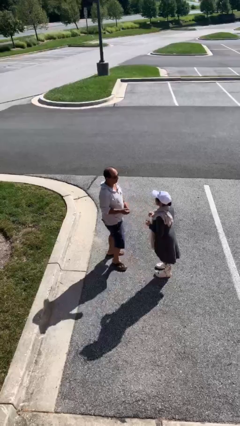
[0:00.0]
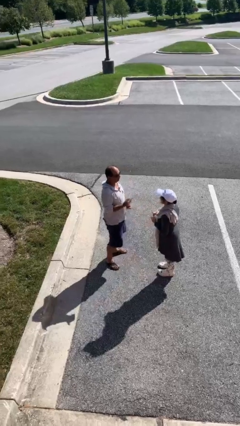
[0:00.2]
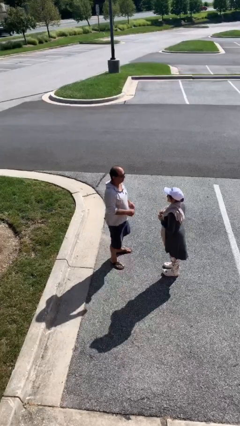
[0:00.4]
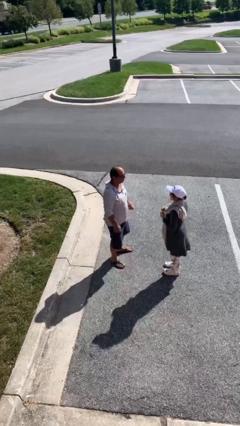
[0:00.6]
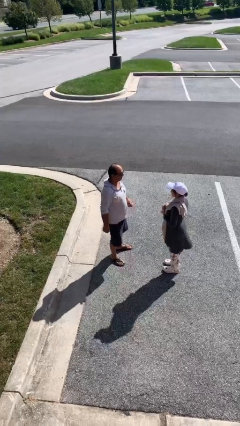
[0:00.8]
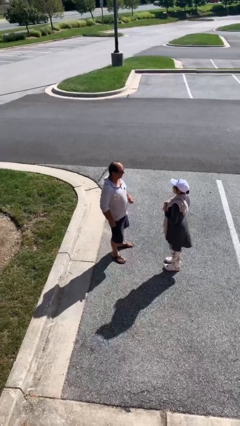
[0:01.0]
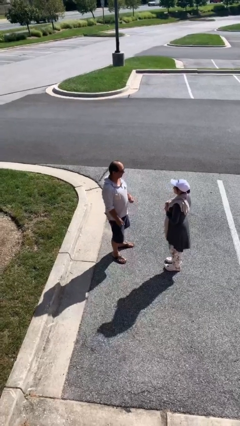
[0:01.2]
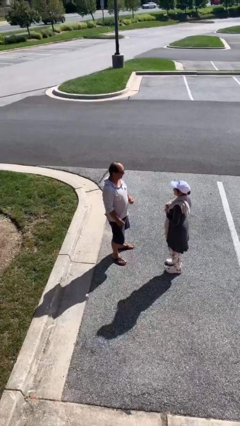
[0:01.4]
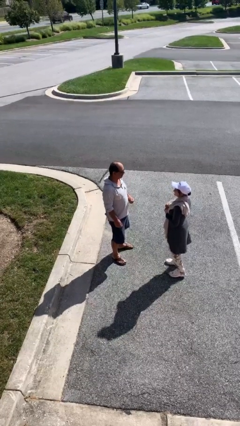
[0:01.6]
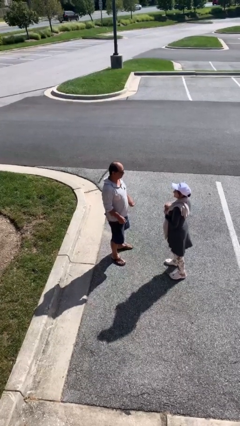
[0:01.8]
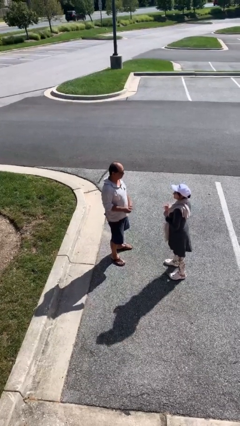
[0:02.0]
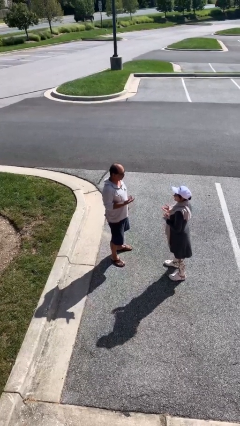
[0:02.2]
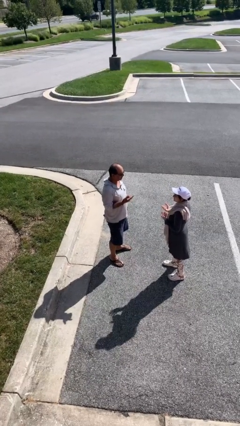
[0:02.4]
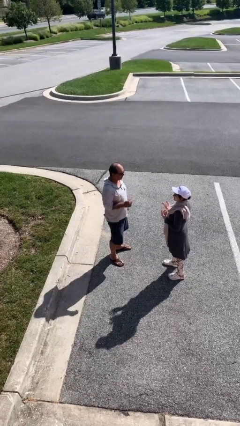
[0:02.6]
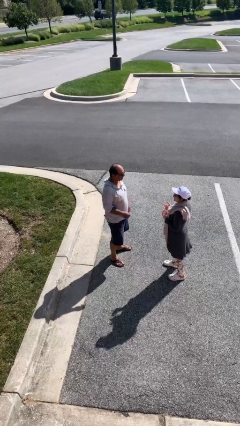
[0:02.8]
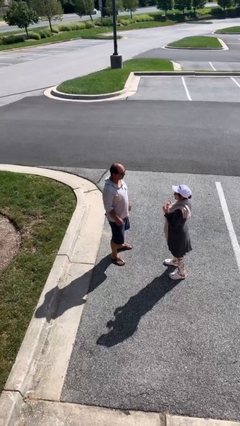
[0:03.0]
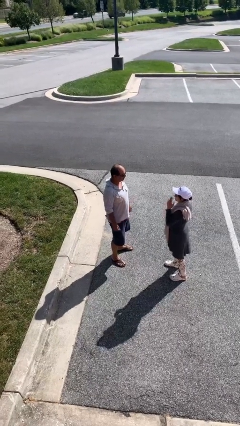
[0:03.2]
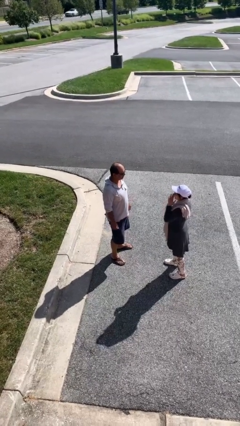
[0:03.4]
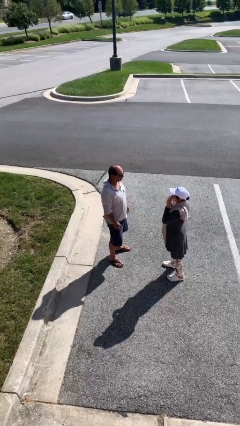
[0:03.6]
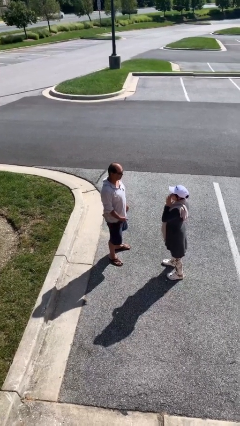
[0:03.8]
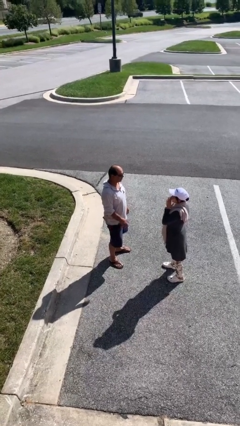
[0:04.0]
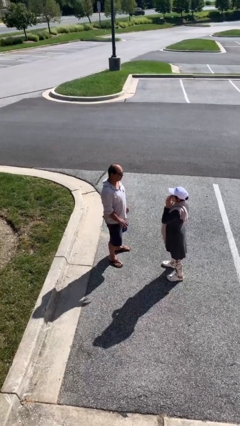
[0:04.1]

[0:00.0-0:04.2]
person talks to person

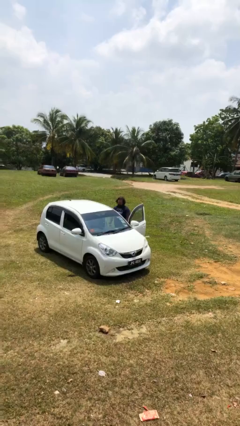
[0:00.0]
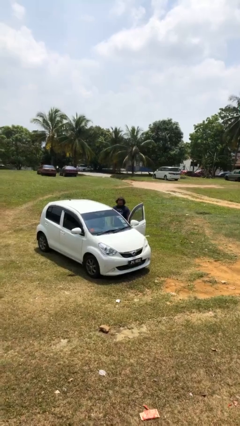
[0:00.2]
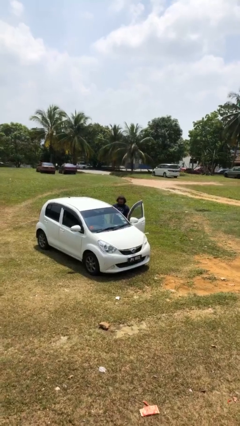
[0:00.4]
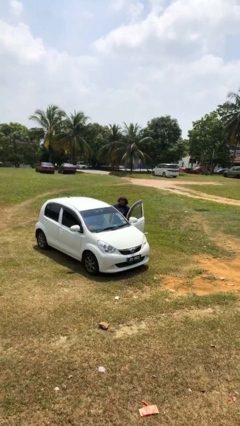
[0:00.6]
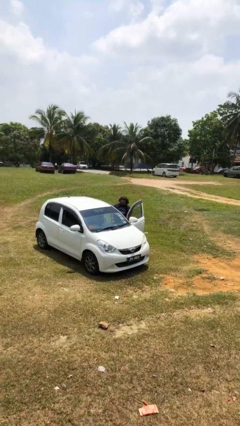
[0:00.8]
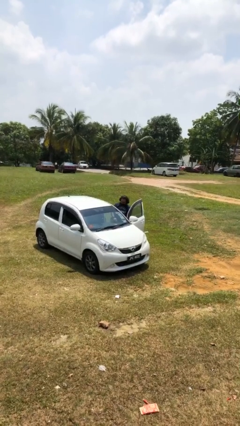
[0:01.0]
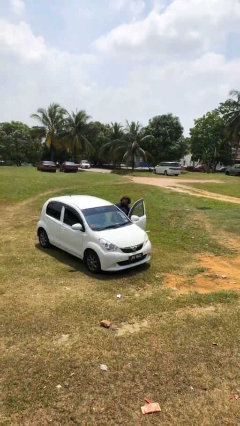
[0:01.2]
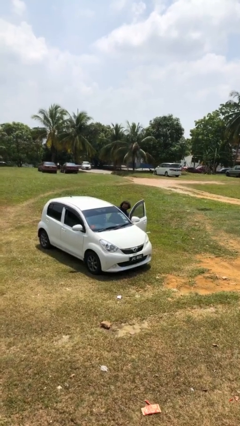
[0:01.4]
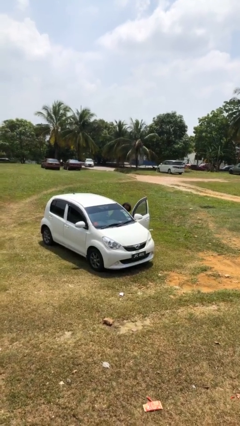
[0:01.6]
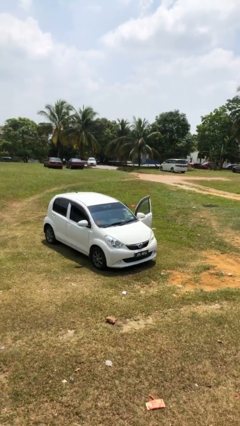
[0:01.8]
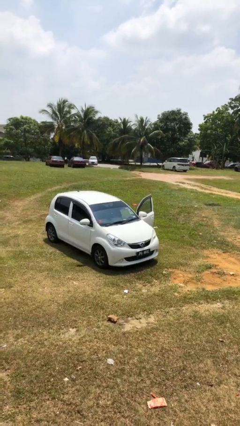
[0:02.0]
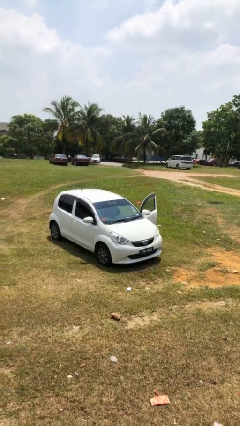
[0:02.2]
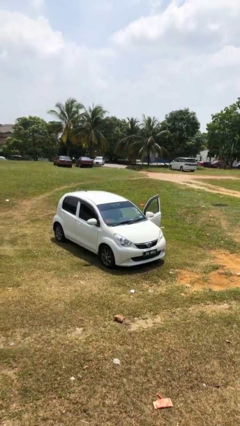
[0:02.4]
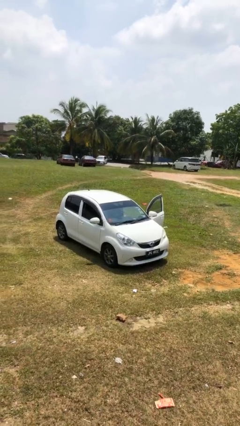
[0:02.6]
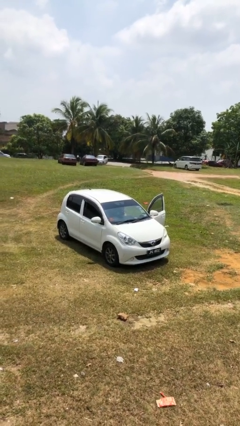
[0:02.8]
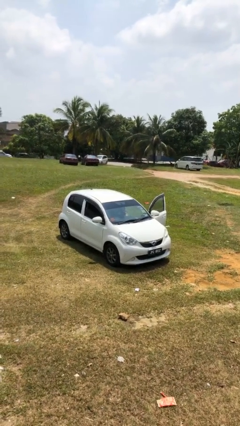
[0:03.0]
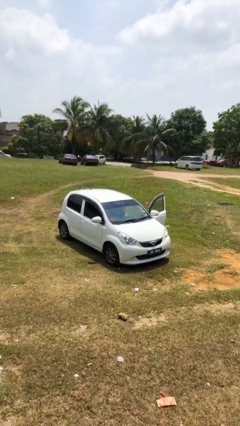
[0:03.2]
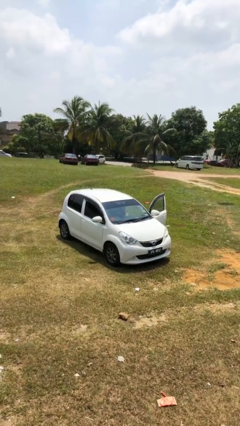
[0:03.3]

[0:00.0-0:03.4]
person enters car

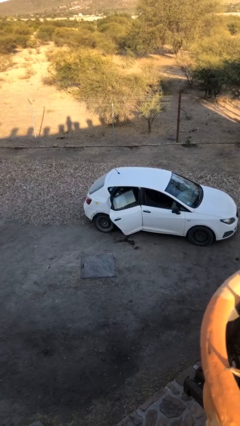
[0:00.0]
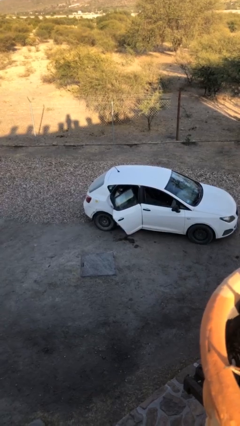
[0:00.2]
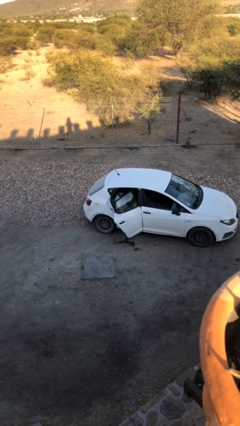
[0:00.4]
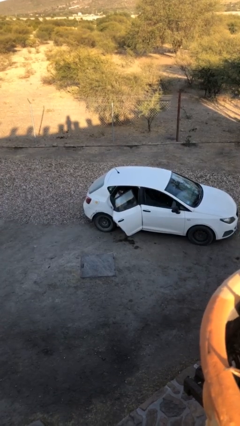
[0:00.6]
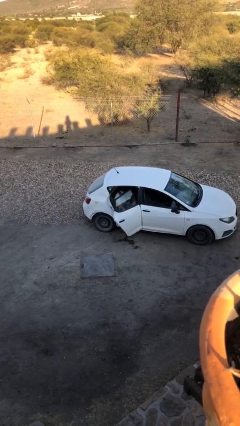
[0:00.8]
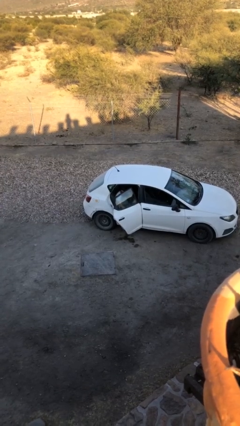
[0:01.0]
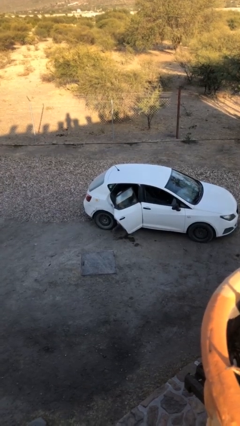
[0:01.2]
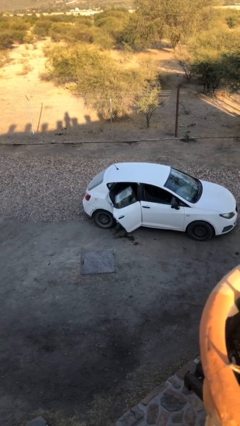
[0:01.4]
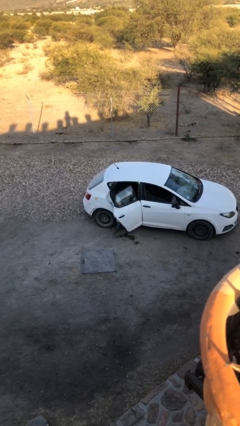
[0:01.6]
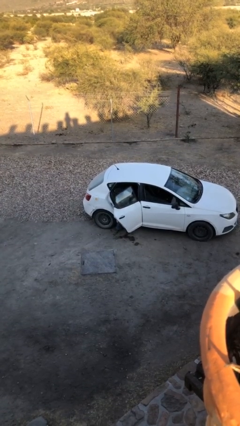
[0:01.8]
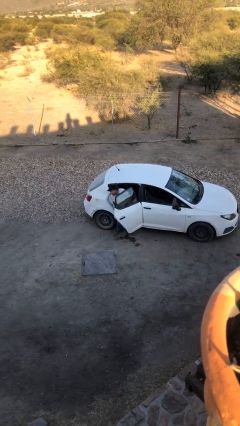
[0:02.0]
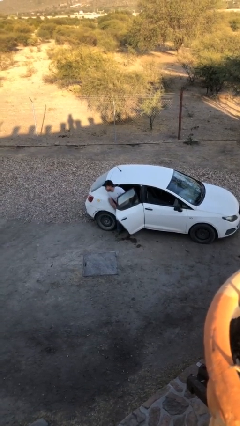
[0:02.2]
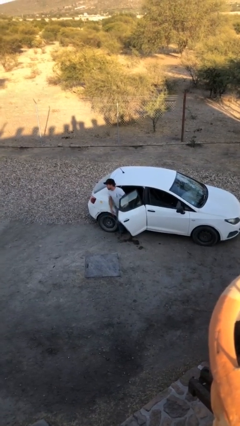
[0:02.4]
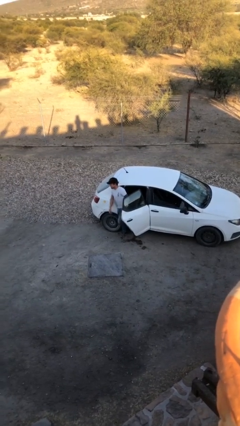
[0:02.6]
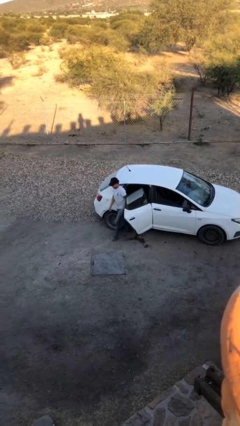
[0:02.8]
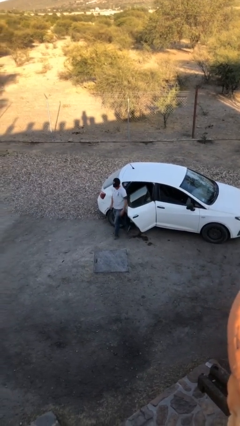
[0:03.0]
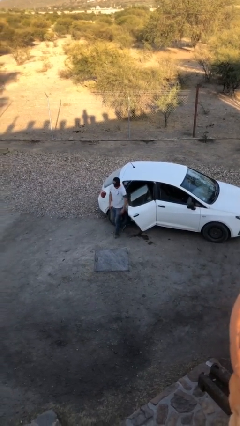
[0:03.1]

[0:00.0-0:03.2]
person exits car

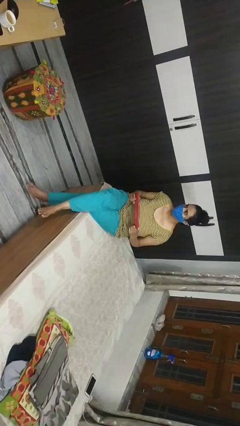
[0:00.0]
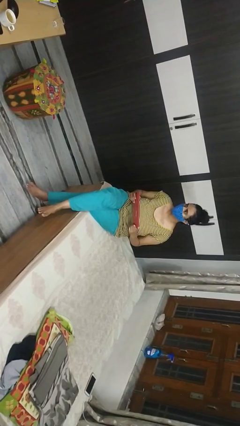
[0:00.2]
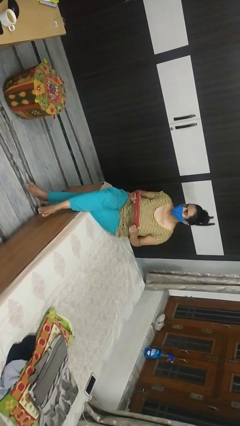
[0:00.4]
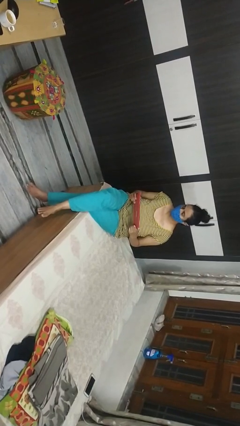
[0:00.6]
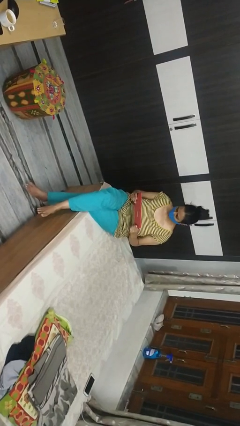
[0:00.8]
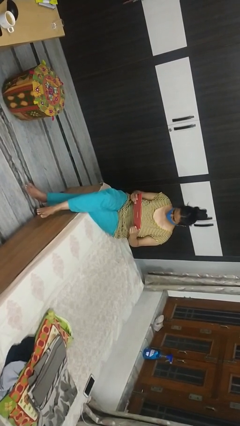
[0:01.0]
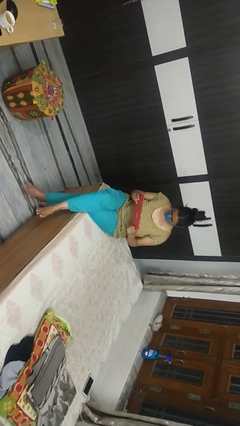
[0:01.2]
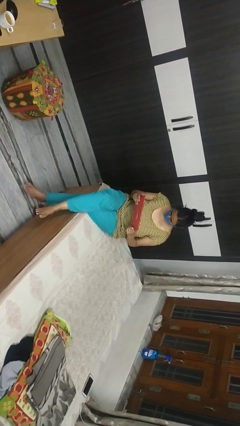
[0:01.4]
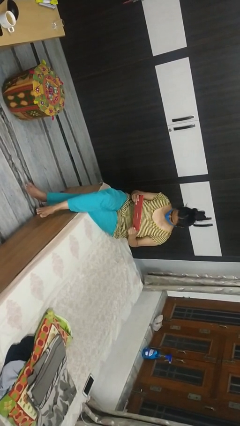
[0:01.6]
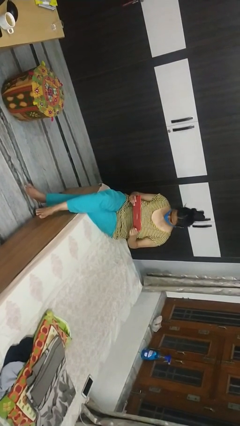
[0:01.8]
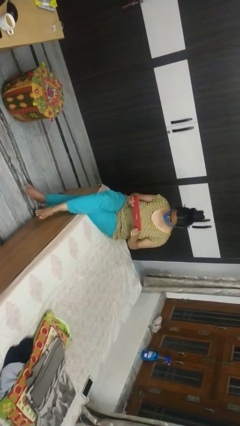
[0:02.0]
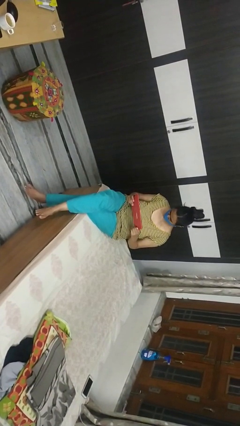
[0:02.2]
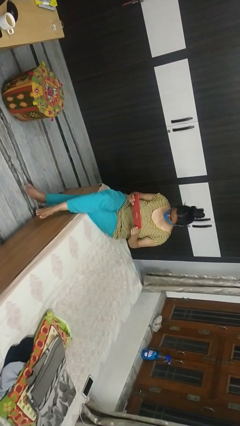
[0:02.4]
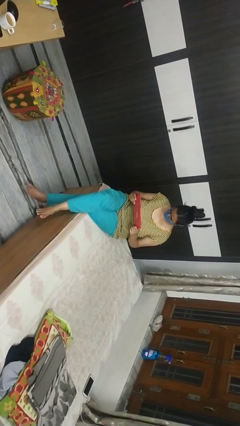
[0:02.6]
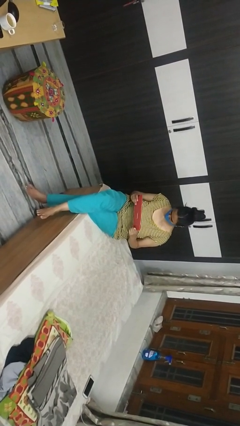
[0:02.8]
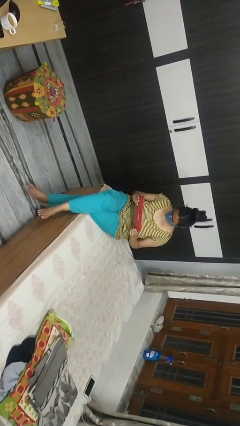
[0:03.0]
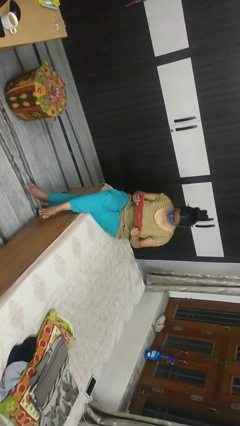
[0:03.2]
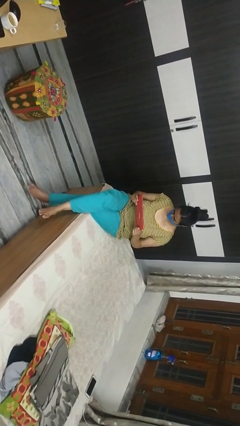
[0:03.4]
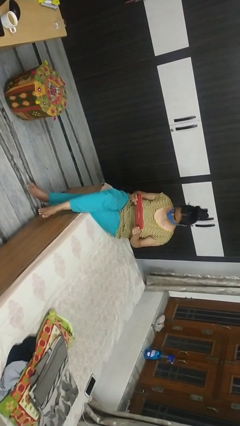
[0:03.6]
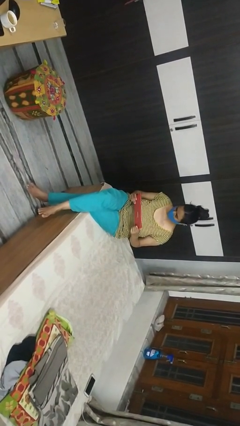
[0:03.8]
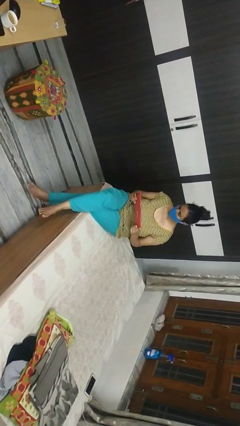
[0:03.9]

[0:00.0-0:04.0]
person interacts with handheld game

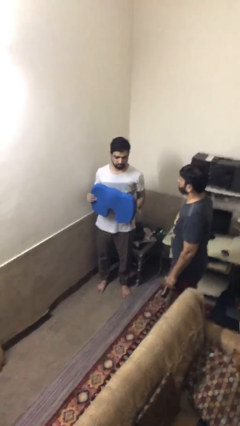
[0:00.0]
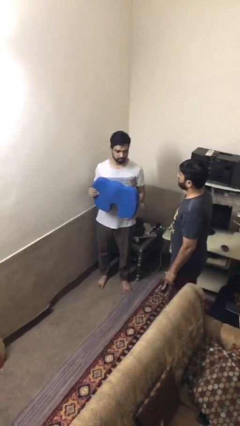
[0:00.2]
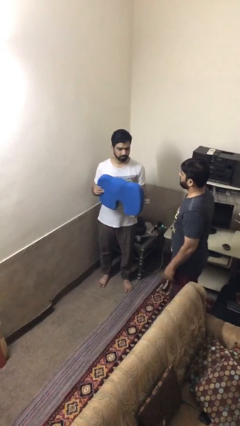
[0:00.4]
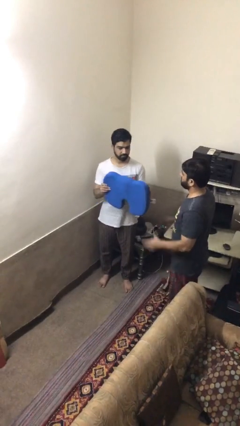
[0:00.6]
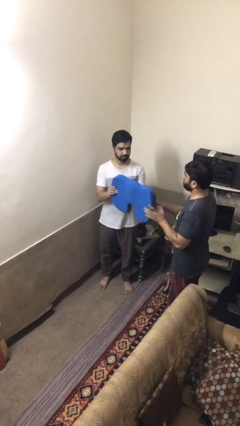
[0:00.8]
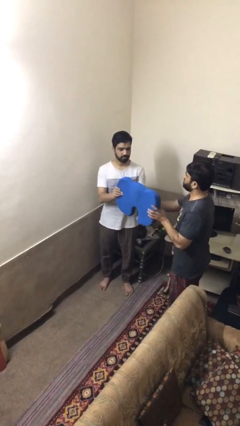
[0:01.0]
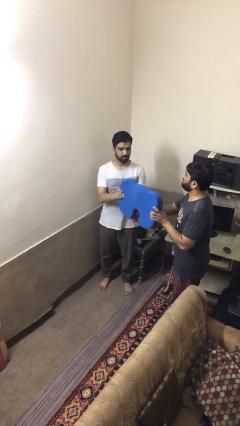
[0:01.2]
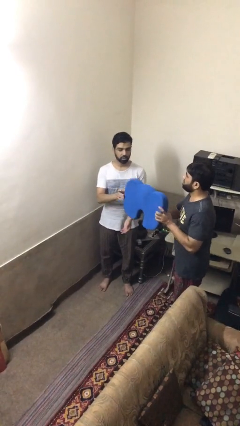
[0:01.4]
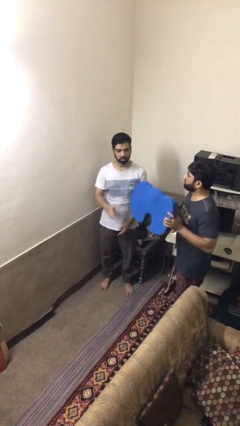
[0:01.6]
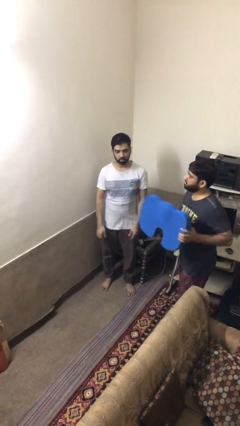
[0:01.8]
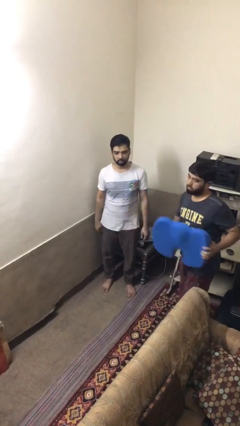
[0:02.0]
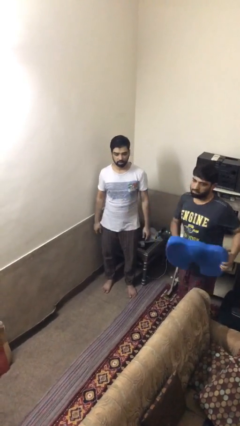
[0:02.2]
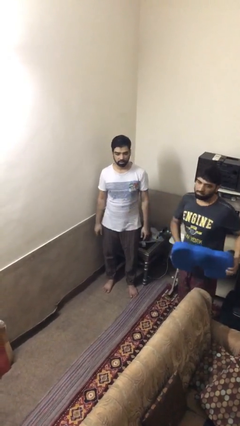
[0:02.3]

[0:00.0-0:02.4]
person transfers object to person

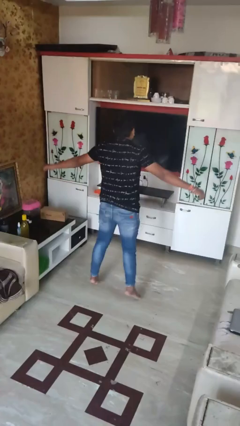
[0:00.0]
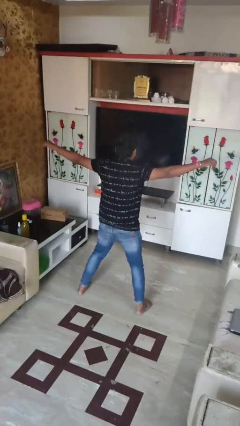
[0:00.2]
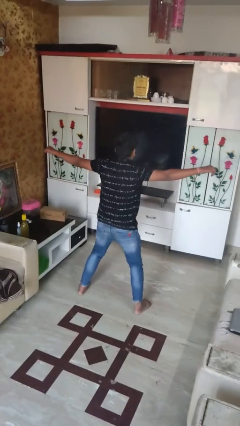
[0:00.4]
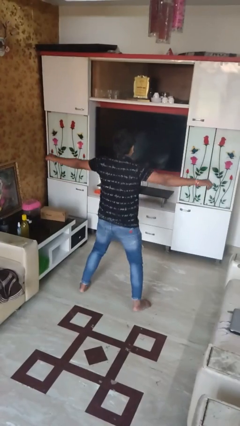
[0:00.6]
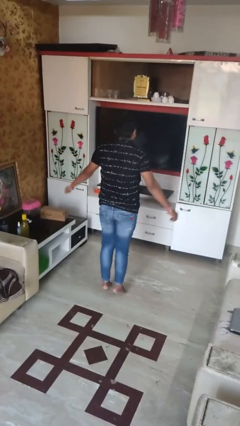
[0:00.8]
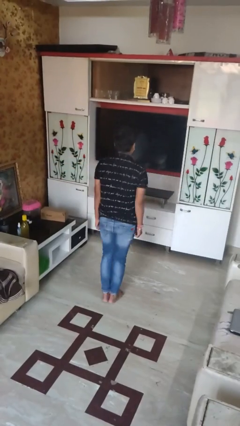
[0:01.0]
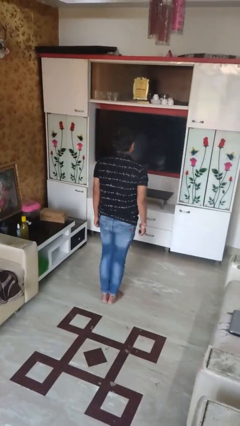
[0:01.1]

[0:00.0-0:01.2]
person exercises with jumping jacks
